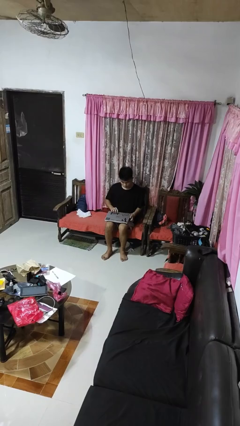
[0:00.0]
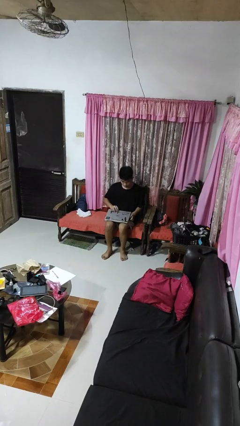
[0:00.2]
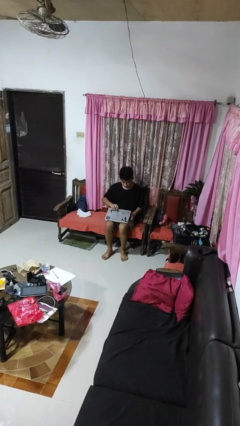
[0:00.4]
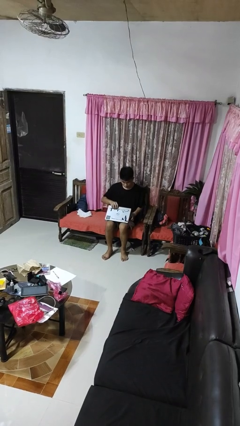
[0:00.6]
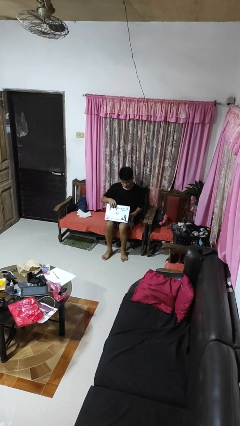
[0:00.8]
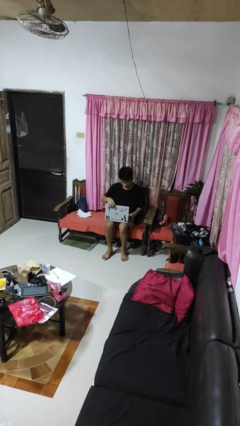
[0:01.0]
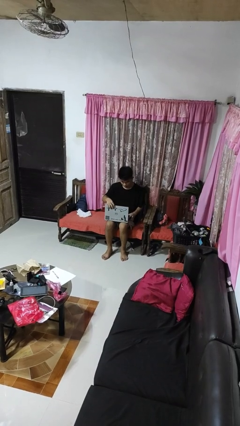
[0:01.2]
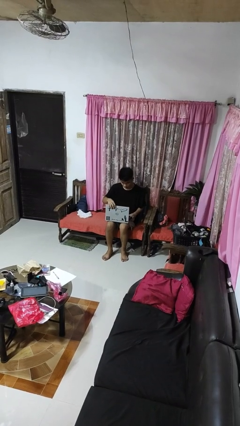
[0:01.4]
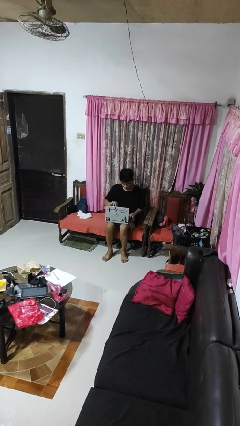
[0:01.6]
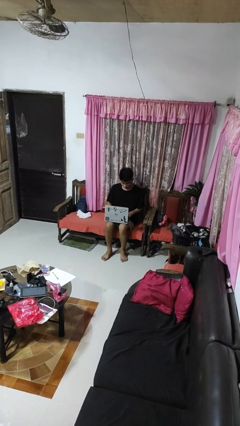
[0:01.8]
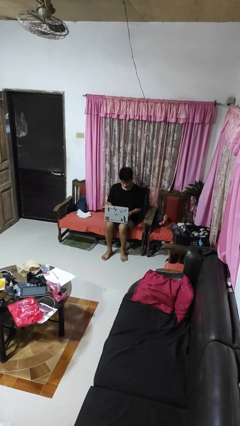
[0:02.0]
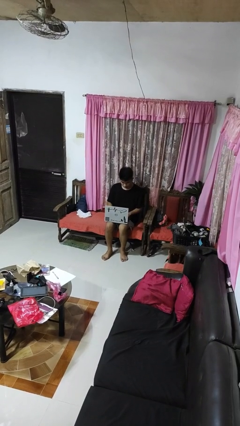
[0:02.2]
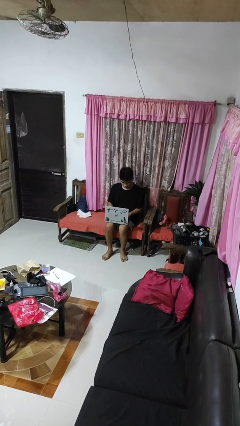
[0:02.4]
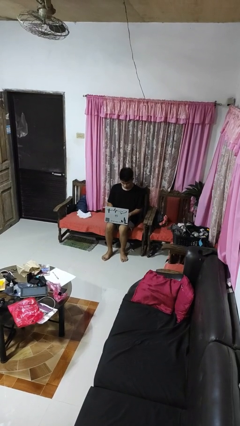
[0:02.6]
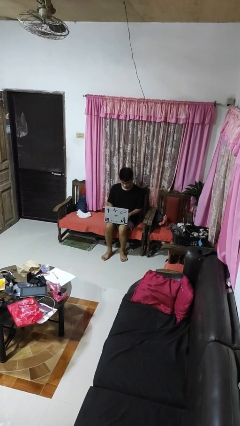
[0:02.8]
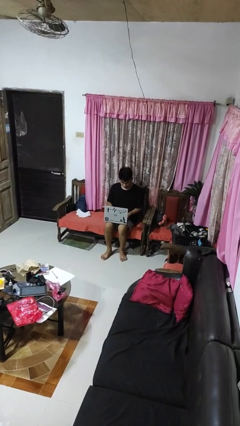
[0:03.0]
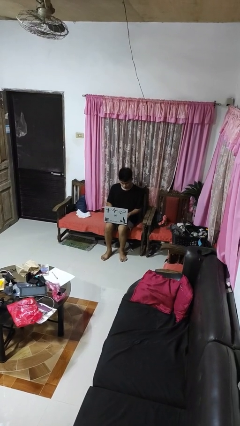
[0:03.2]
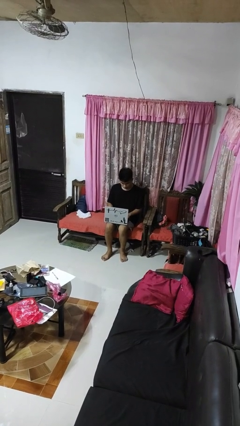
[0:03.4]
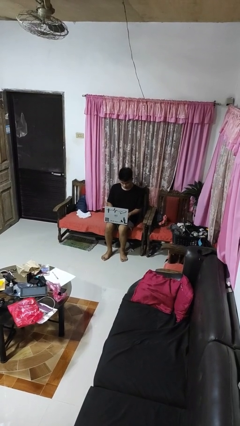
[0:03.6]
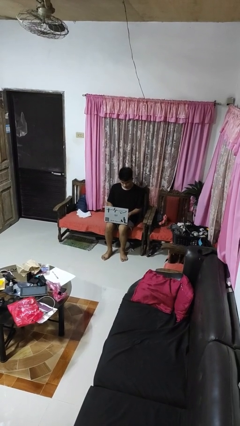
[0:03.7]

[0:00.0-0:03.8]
person opens laptop

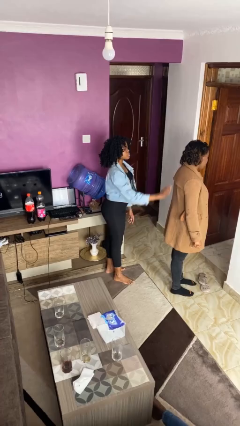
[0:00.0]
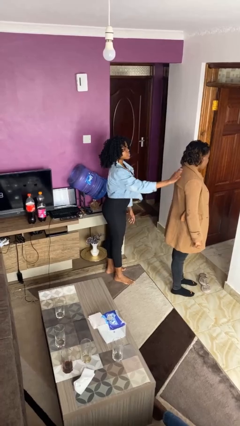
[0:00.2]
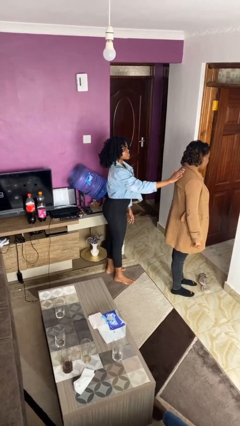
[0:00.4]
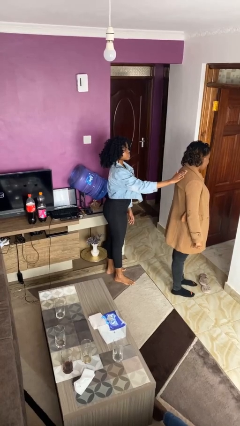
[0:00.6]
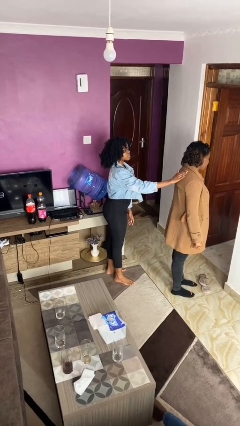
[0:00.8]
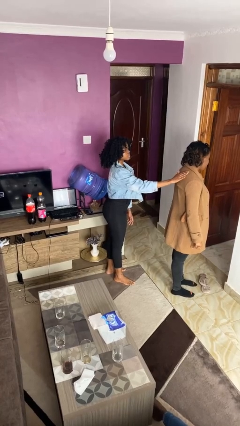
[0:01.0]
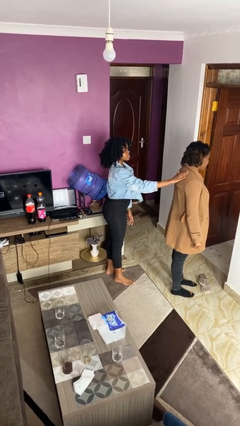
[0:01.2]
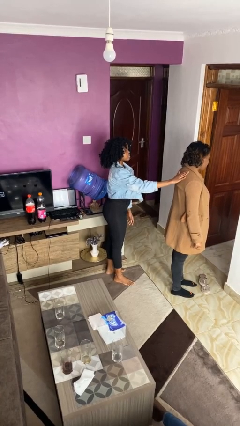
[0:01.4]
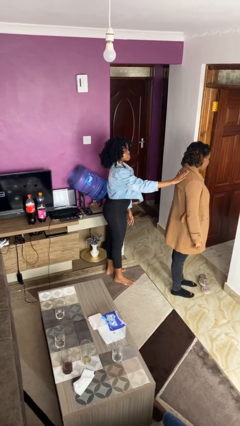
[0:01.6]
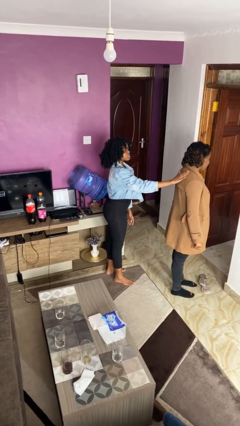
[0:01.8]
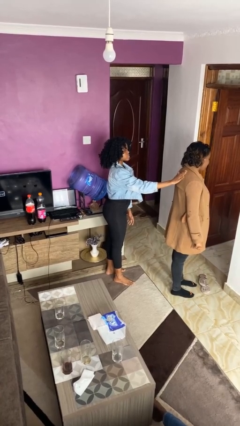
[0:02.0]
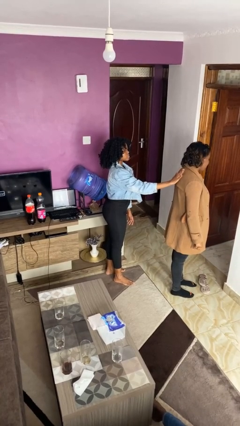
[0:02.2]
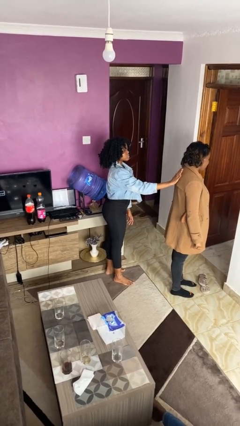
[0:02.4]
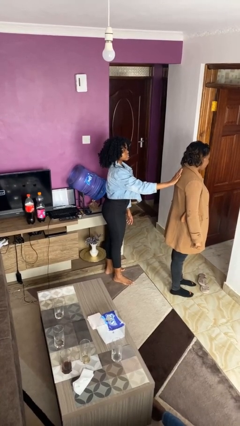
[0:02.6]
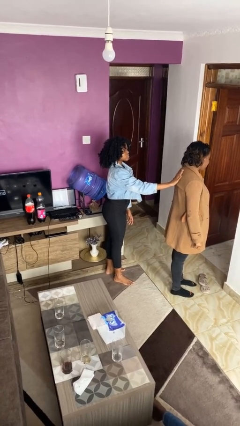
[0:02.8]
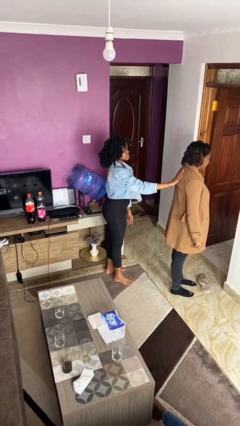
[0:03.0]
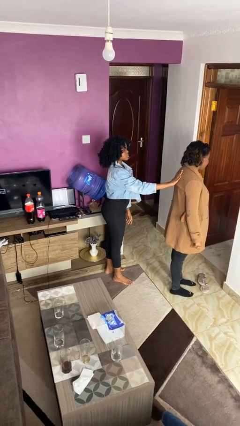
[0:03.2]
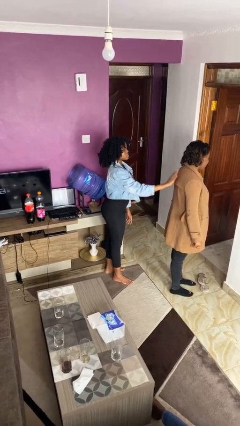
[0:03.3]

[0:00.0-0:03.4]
person touches back of person

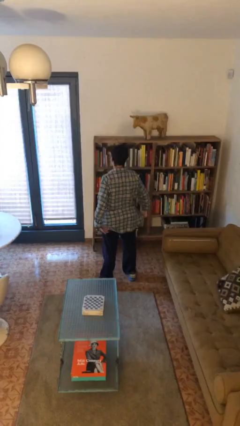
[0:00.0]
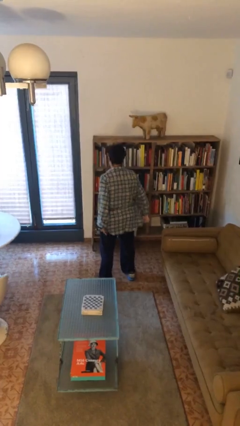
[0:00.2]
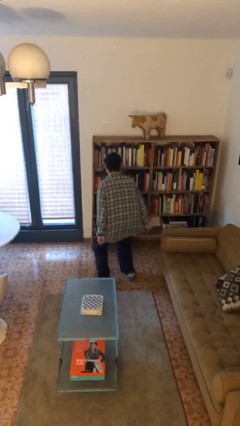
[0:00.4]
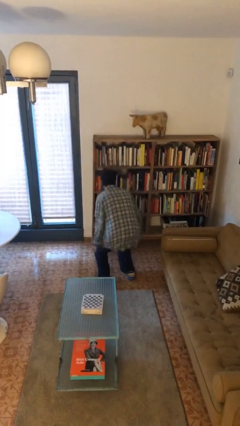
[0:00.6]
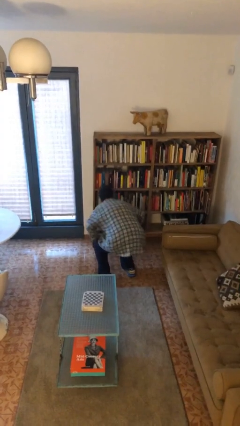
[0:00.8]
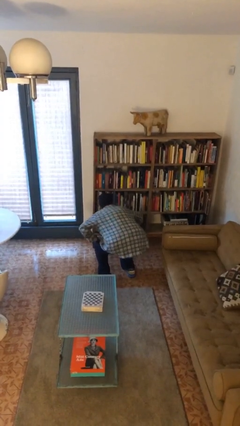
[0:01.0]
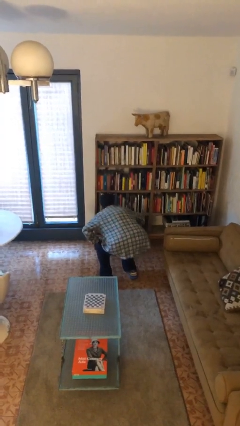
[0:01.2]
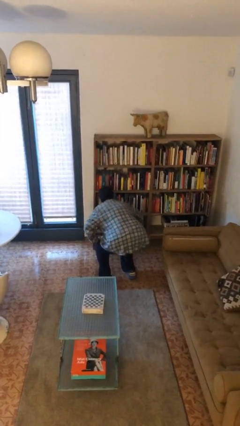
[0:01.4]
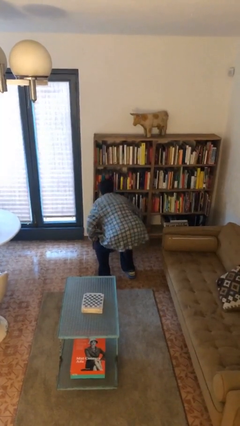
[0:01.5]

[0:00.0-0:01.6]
person squats

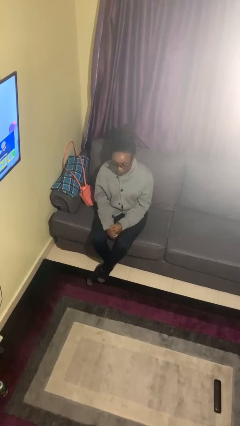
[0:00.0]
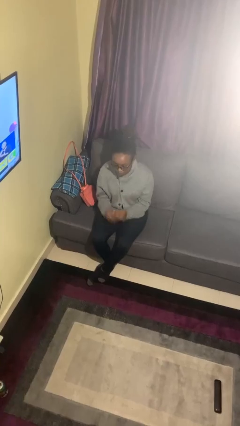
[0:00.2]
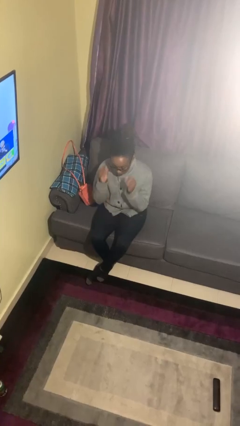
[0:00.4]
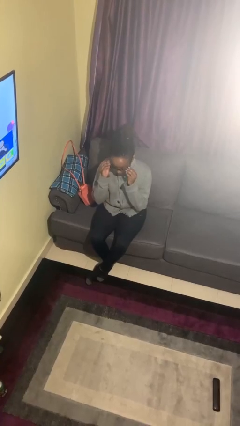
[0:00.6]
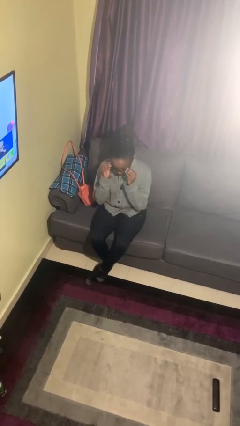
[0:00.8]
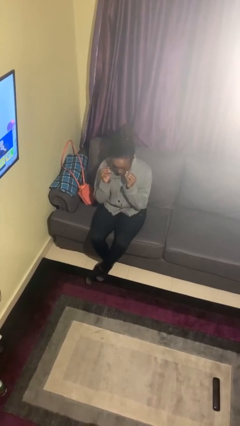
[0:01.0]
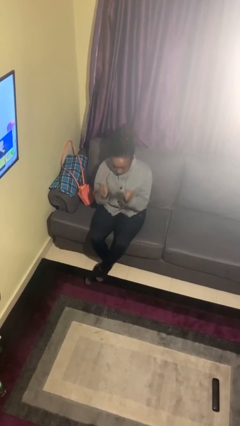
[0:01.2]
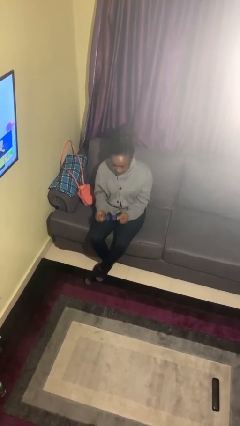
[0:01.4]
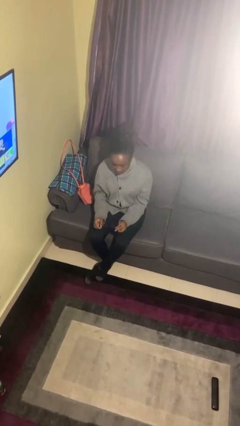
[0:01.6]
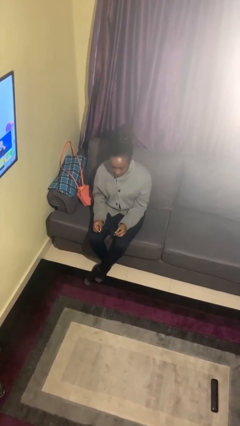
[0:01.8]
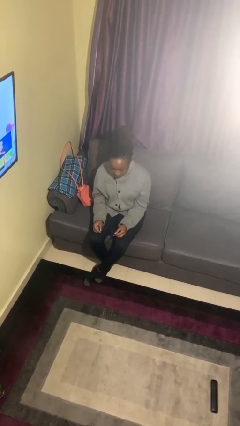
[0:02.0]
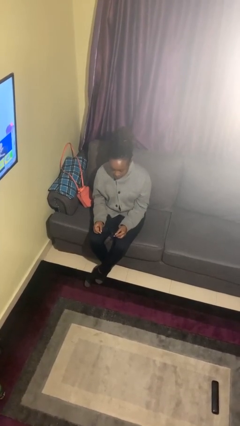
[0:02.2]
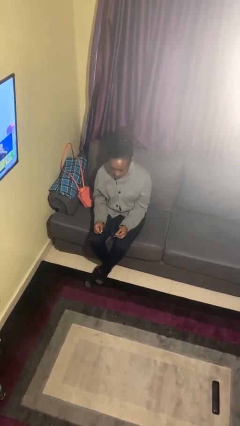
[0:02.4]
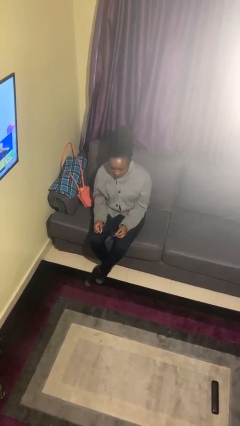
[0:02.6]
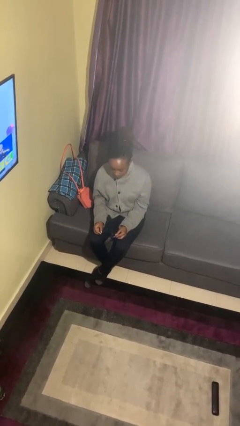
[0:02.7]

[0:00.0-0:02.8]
person takes off glasses

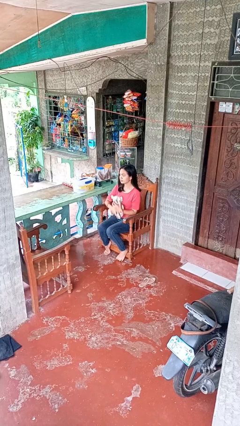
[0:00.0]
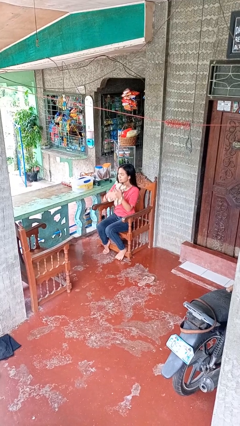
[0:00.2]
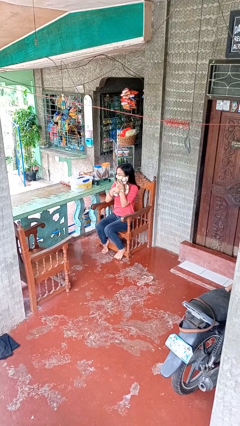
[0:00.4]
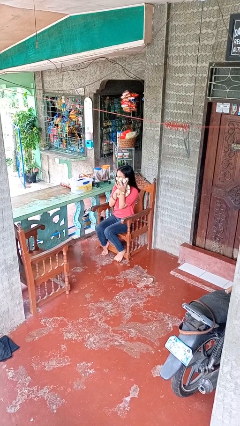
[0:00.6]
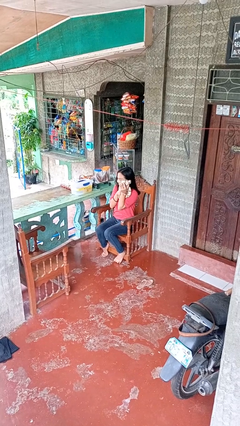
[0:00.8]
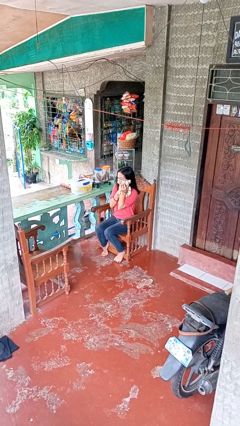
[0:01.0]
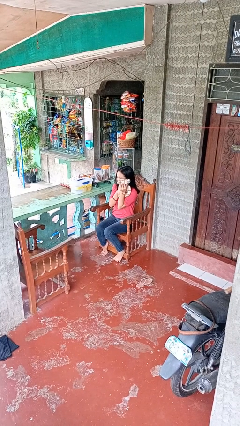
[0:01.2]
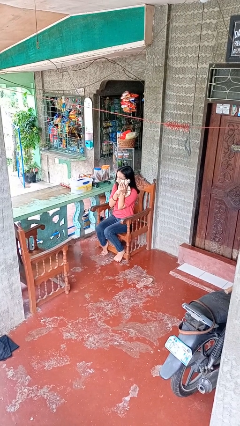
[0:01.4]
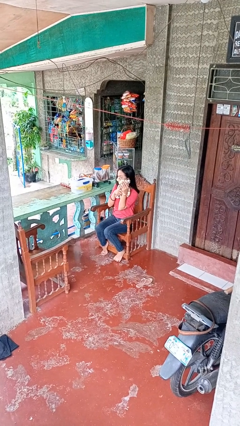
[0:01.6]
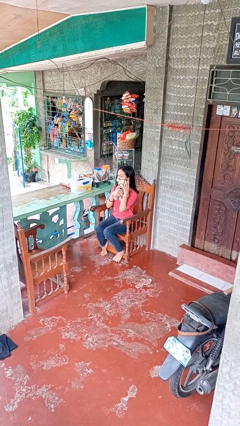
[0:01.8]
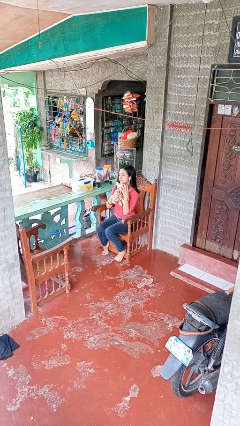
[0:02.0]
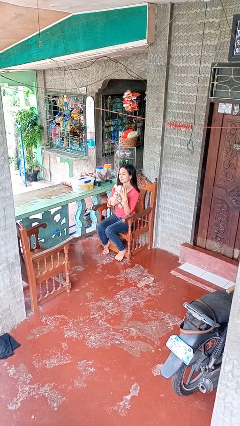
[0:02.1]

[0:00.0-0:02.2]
person hugs stuffed animal

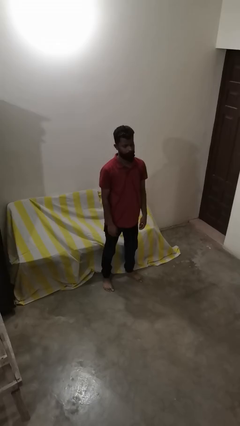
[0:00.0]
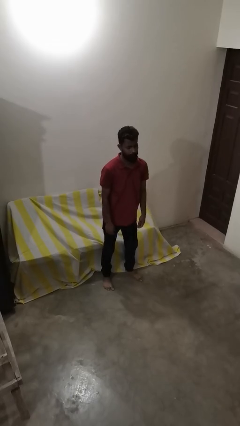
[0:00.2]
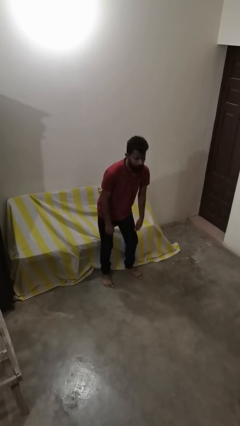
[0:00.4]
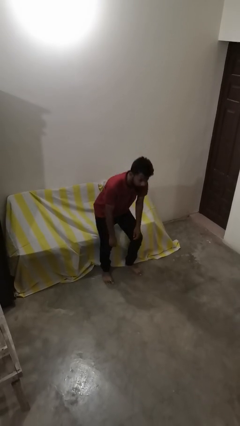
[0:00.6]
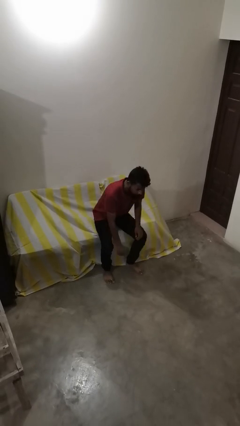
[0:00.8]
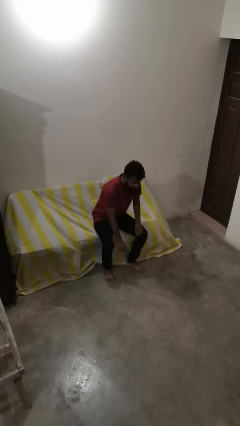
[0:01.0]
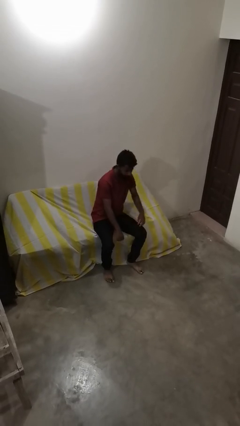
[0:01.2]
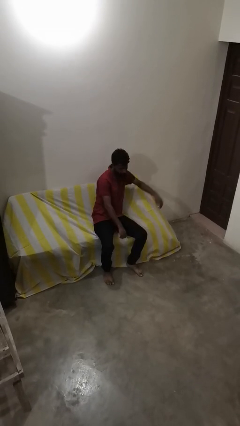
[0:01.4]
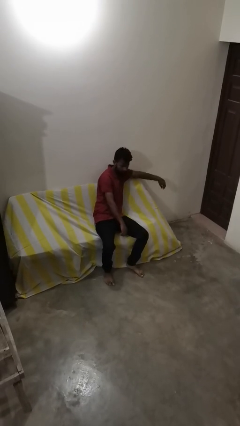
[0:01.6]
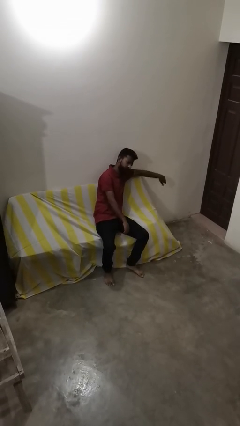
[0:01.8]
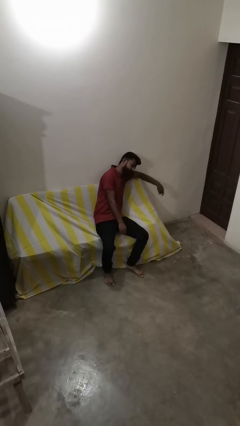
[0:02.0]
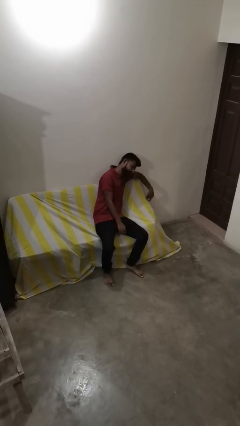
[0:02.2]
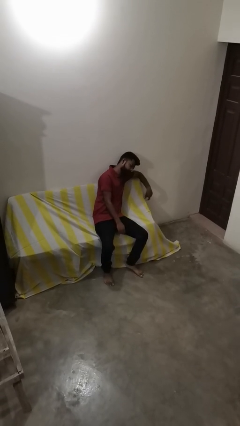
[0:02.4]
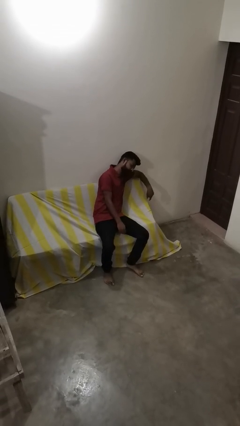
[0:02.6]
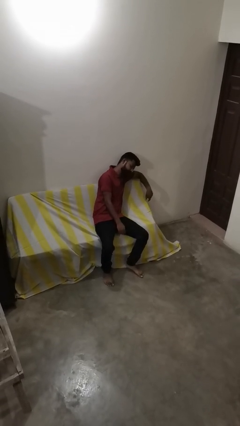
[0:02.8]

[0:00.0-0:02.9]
person lies down on couch

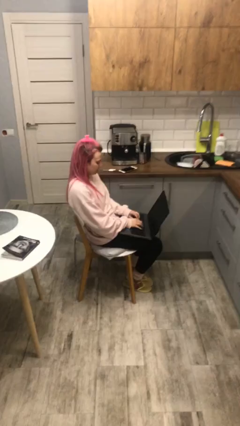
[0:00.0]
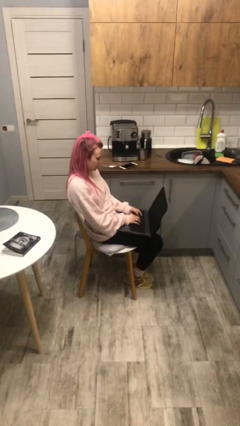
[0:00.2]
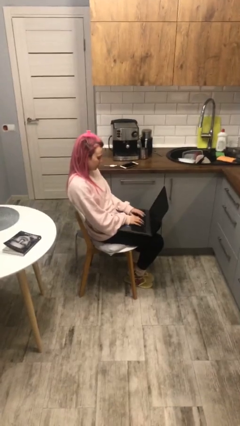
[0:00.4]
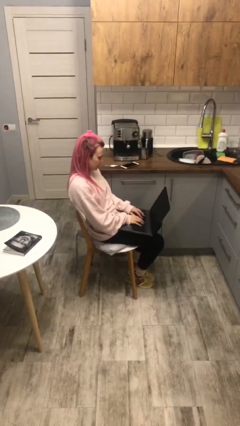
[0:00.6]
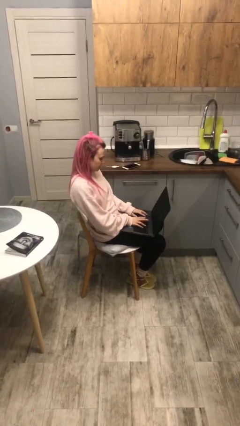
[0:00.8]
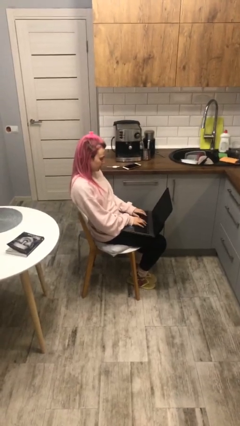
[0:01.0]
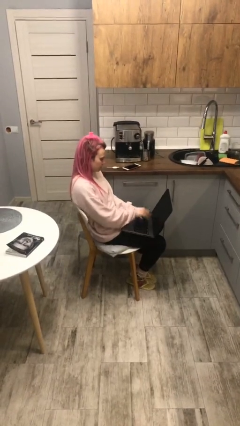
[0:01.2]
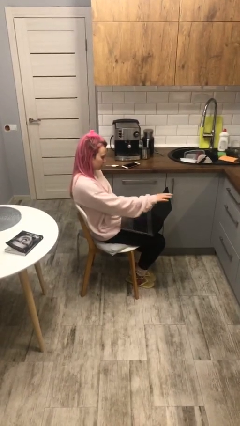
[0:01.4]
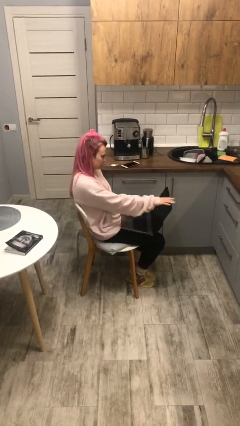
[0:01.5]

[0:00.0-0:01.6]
person interacts with laptop
